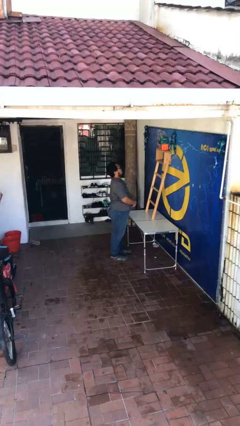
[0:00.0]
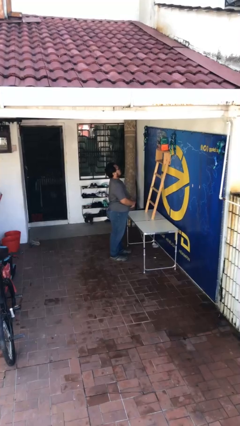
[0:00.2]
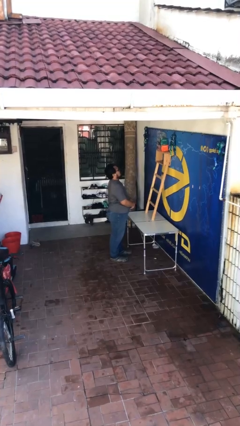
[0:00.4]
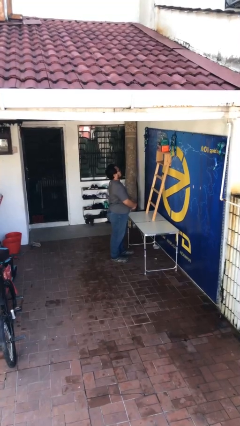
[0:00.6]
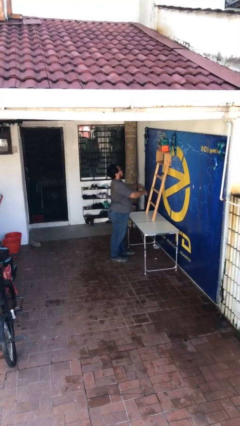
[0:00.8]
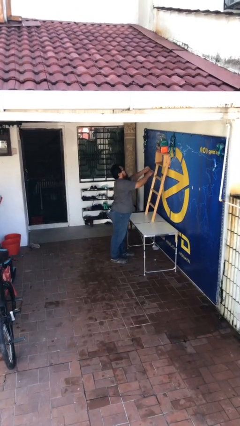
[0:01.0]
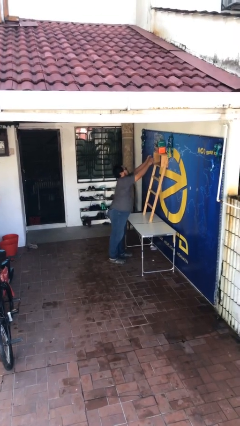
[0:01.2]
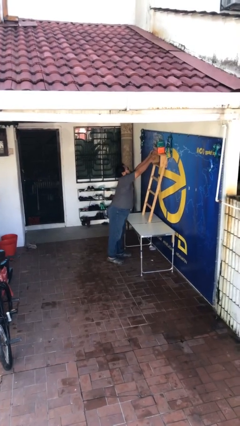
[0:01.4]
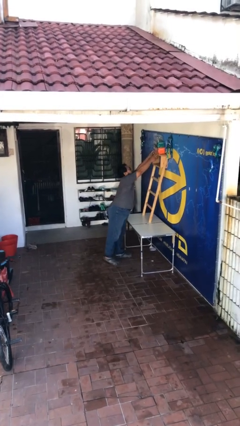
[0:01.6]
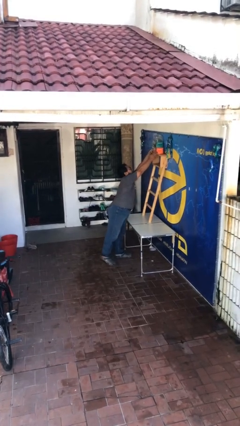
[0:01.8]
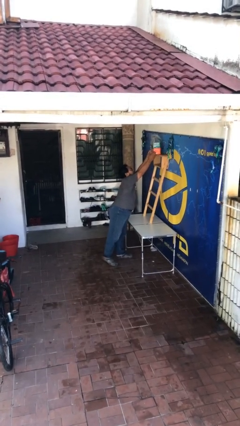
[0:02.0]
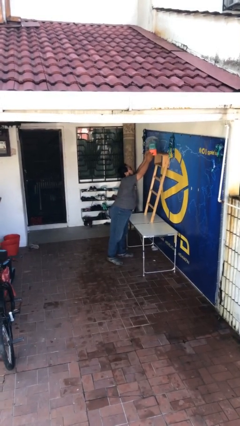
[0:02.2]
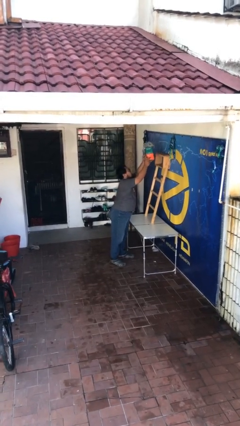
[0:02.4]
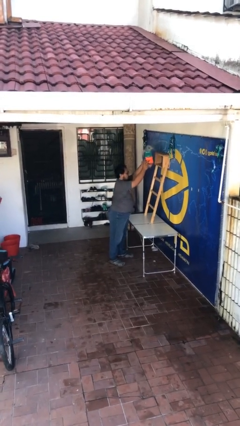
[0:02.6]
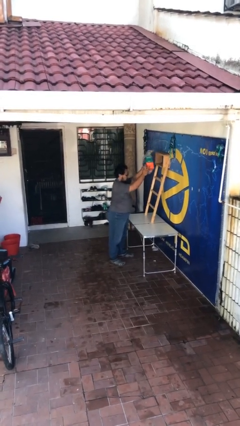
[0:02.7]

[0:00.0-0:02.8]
person picks up object from shelf

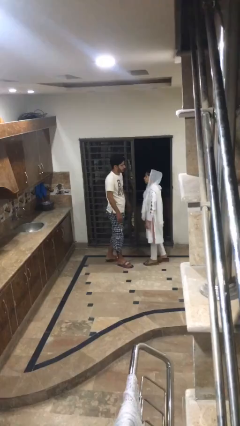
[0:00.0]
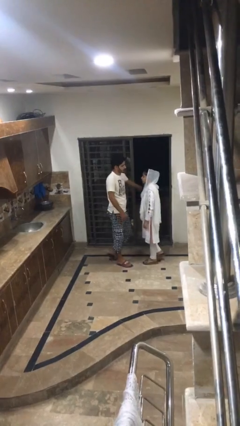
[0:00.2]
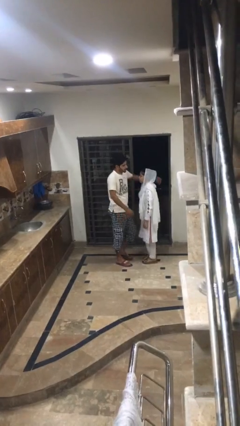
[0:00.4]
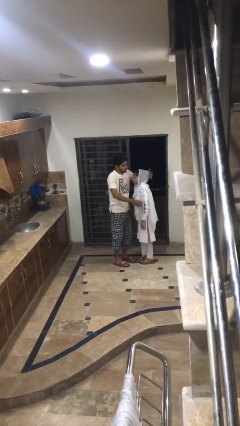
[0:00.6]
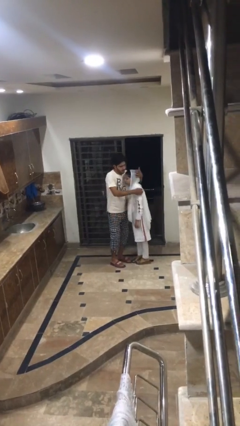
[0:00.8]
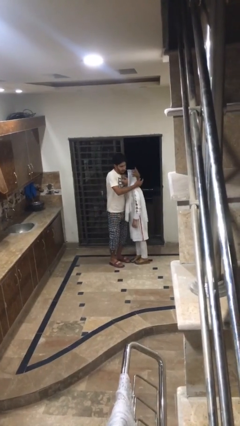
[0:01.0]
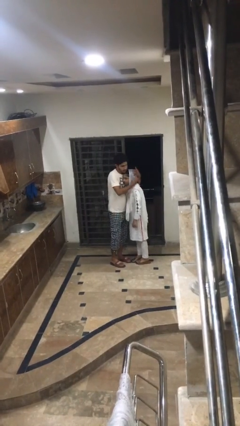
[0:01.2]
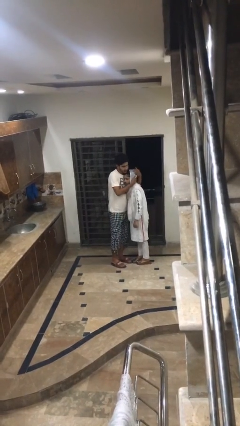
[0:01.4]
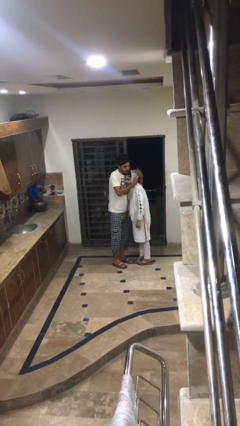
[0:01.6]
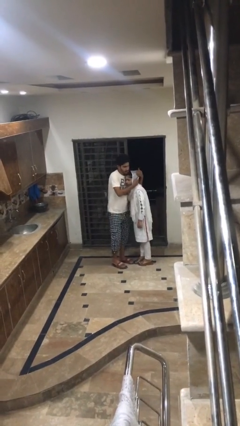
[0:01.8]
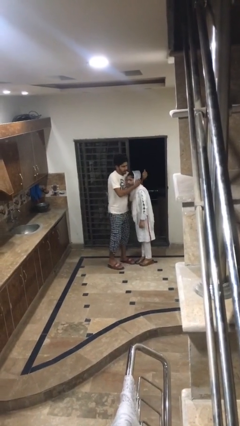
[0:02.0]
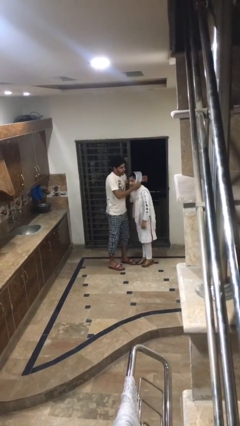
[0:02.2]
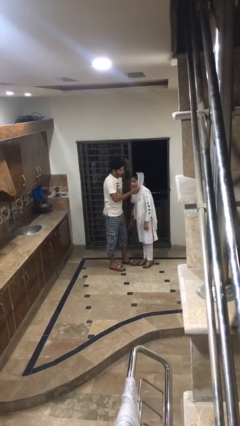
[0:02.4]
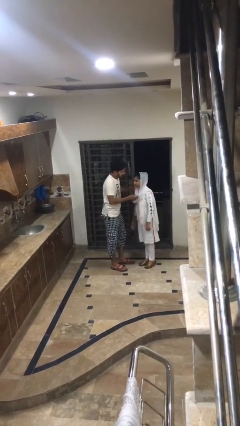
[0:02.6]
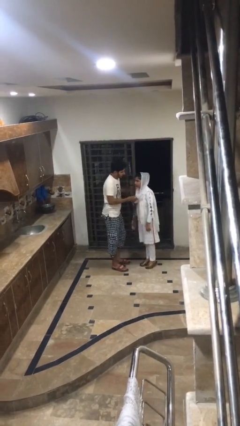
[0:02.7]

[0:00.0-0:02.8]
person embraces person

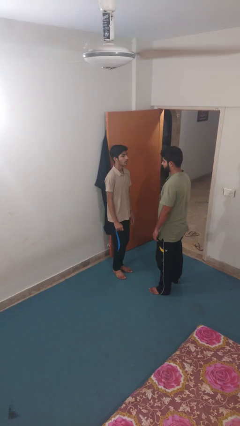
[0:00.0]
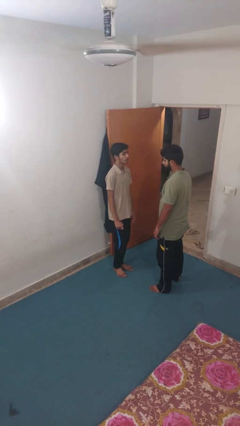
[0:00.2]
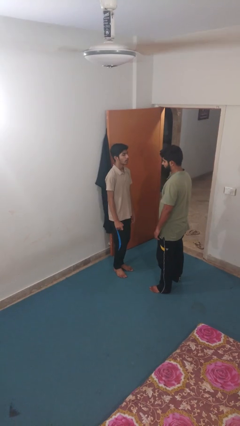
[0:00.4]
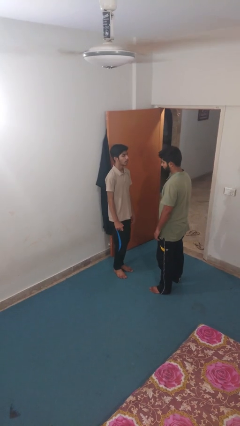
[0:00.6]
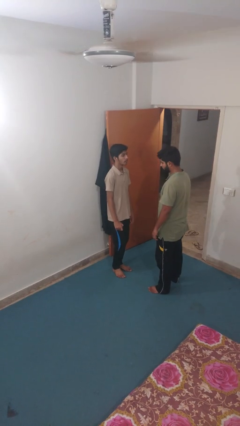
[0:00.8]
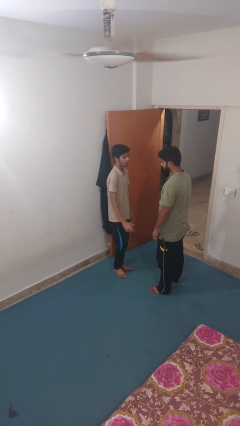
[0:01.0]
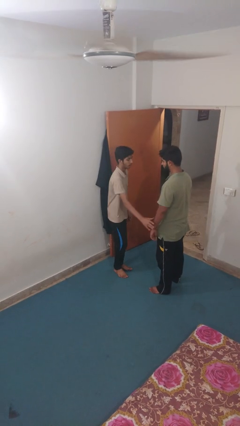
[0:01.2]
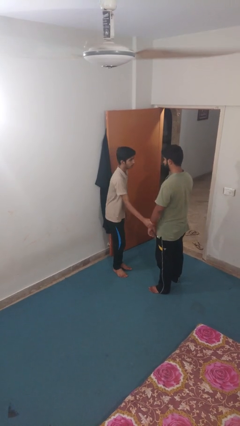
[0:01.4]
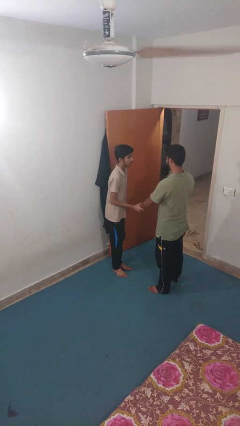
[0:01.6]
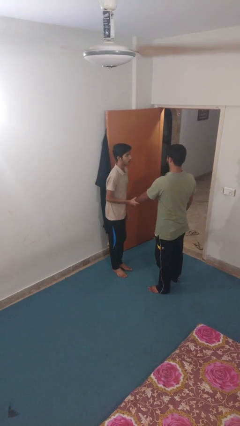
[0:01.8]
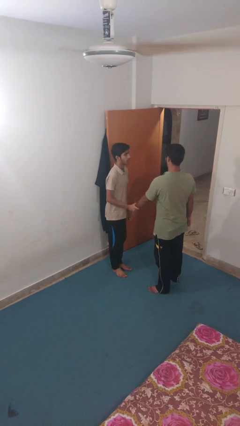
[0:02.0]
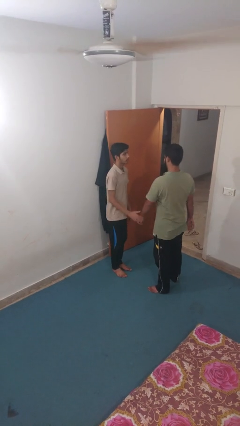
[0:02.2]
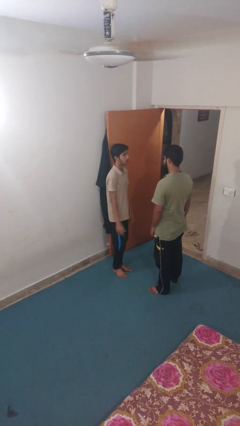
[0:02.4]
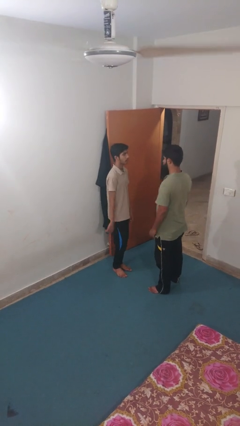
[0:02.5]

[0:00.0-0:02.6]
person grabs person by forearm

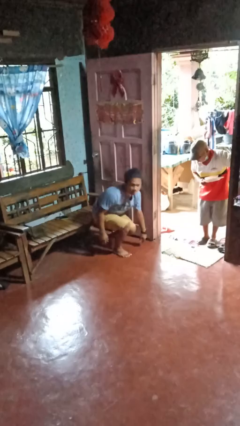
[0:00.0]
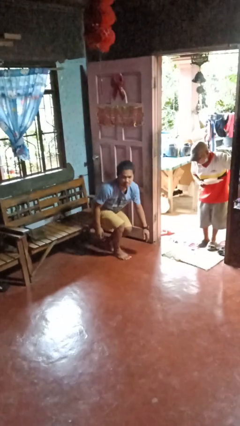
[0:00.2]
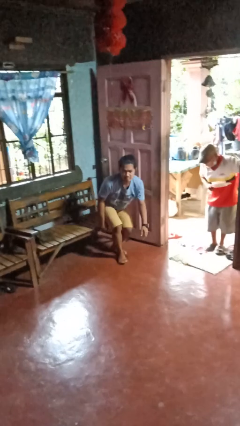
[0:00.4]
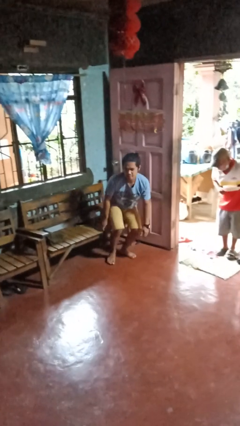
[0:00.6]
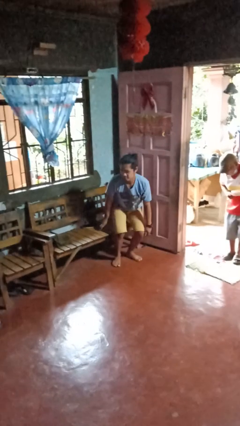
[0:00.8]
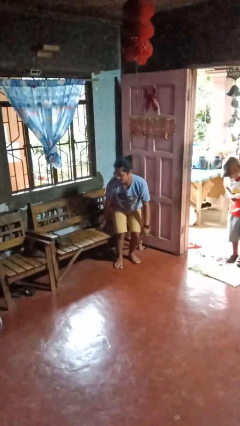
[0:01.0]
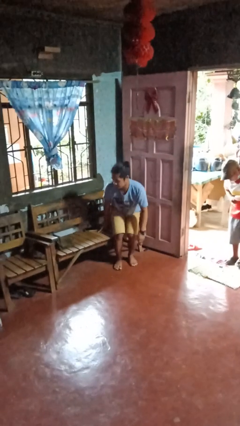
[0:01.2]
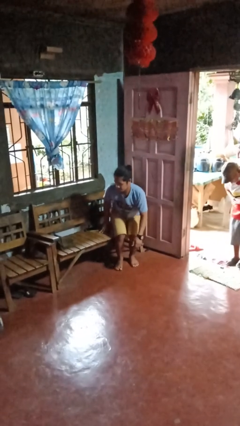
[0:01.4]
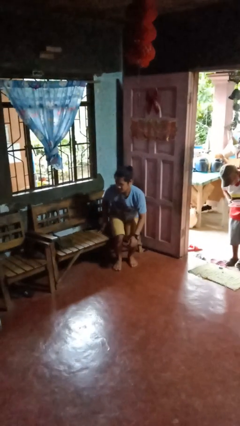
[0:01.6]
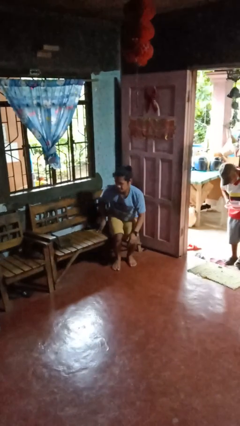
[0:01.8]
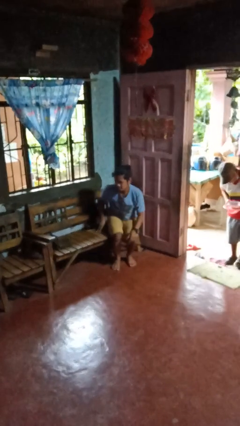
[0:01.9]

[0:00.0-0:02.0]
person stands up from floor

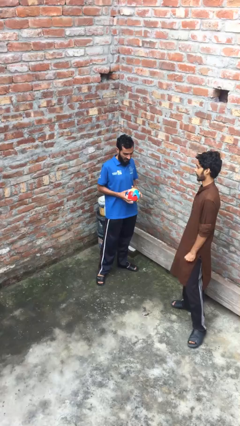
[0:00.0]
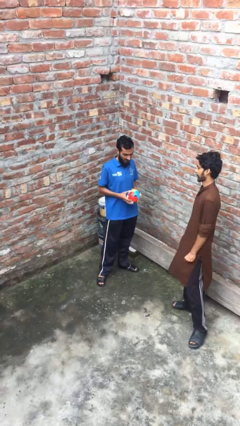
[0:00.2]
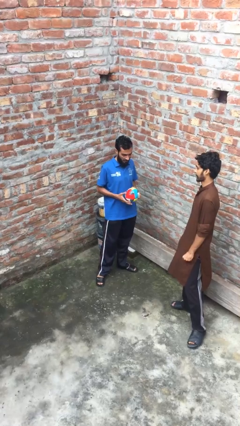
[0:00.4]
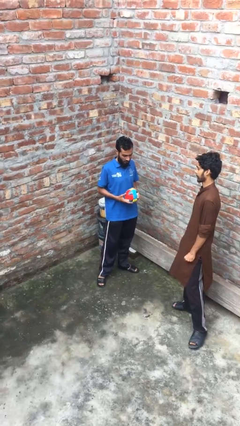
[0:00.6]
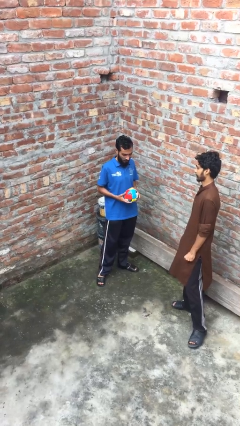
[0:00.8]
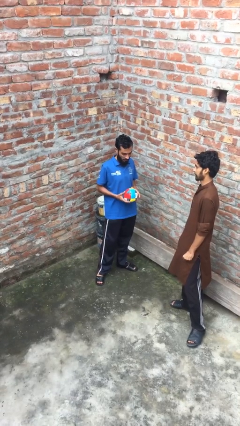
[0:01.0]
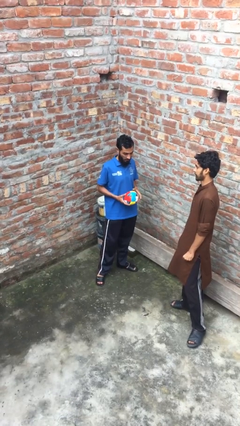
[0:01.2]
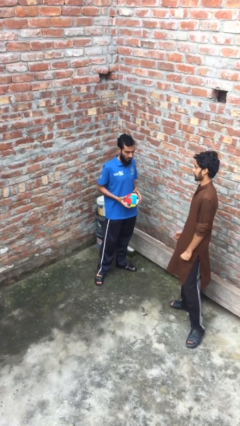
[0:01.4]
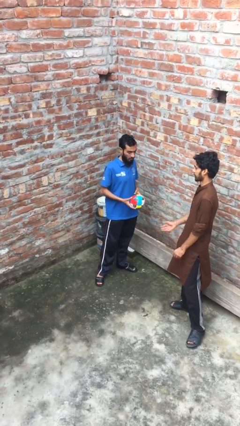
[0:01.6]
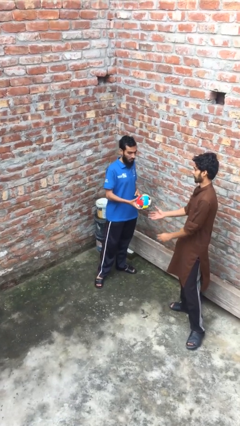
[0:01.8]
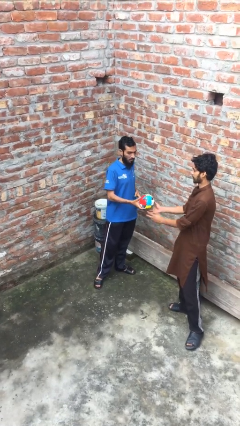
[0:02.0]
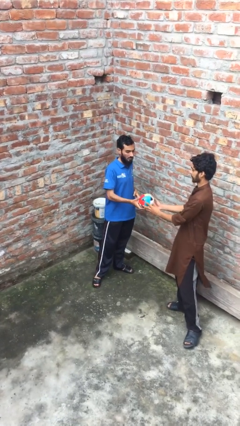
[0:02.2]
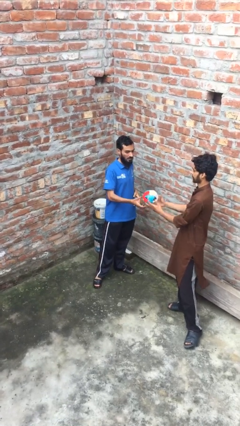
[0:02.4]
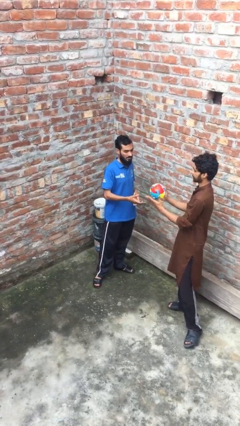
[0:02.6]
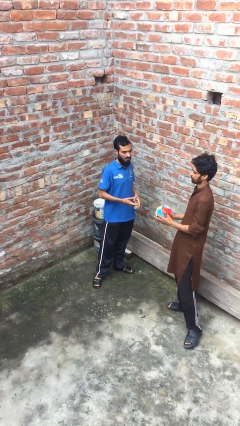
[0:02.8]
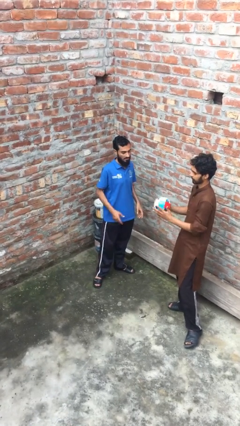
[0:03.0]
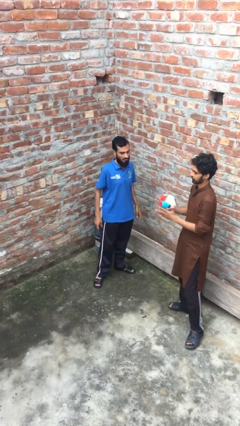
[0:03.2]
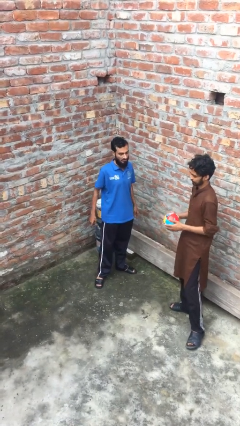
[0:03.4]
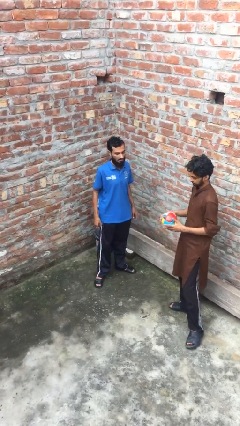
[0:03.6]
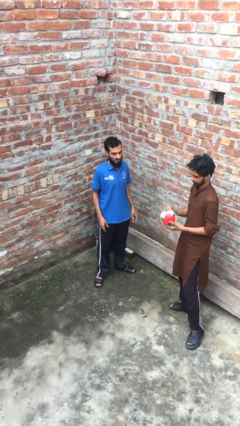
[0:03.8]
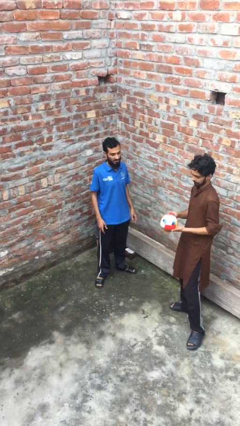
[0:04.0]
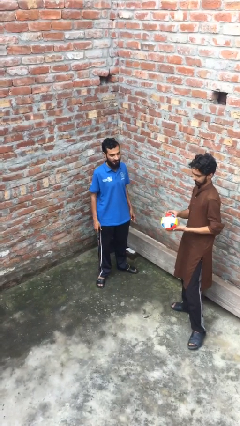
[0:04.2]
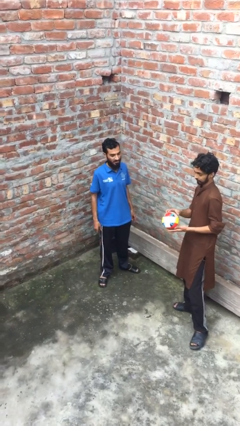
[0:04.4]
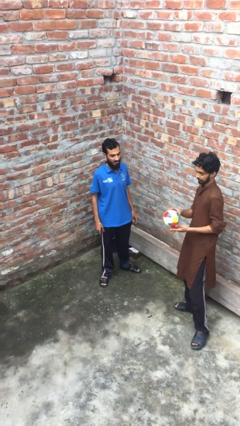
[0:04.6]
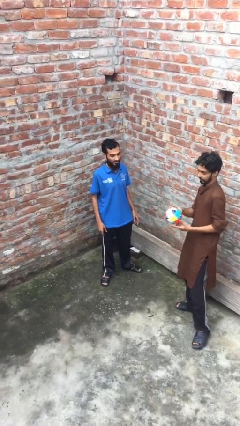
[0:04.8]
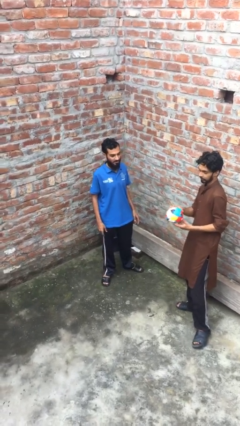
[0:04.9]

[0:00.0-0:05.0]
person transfers object to person

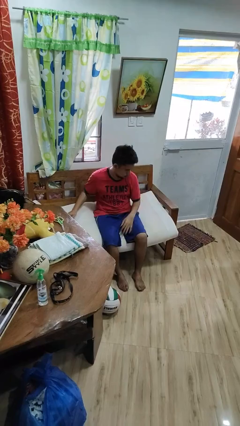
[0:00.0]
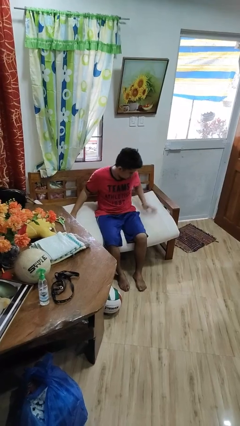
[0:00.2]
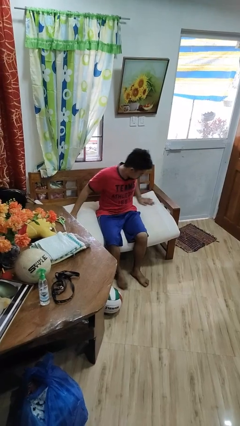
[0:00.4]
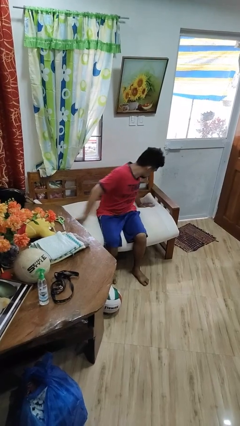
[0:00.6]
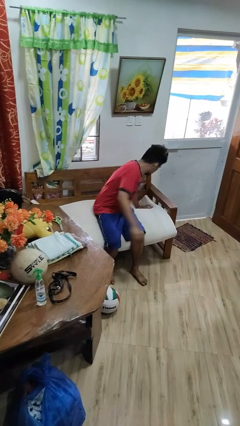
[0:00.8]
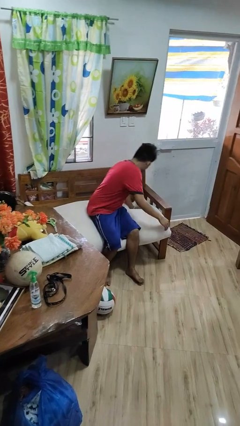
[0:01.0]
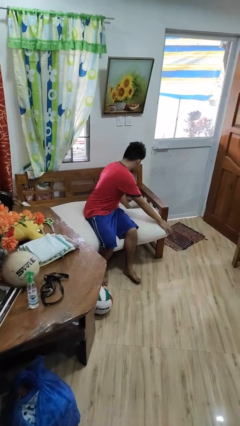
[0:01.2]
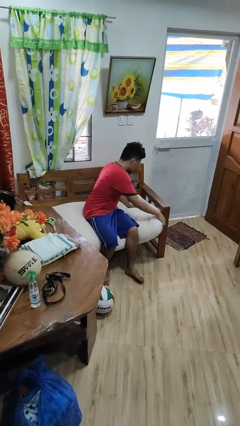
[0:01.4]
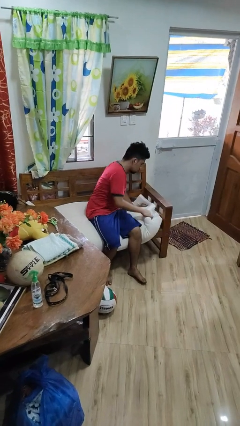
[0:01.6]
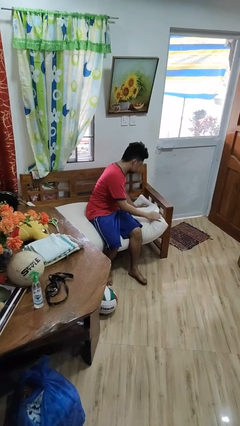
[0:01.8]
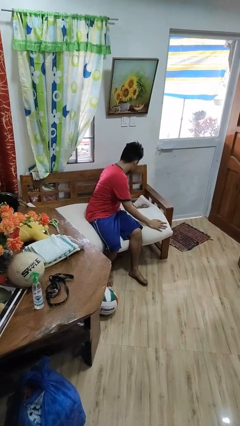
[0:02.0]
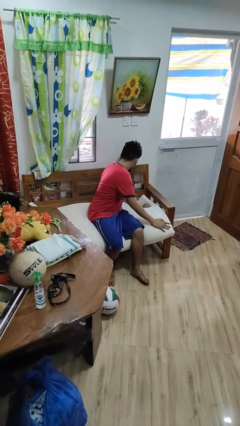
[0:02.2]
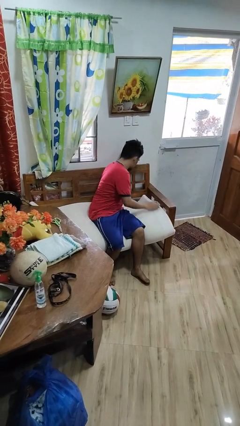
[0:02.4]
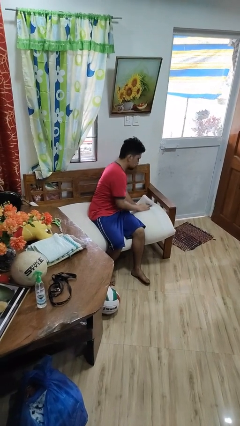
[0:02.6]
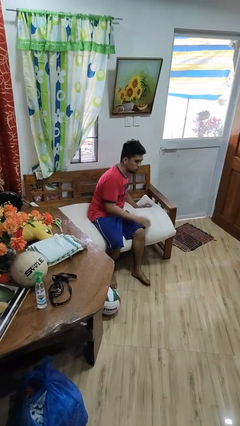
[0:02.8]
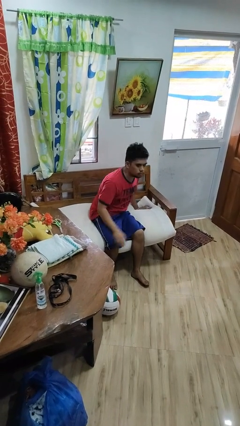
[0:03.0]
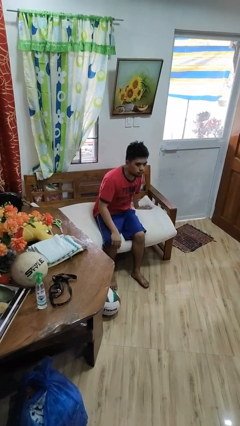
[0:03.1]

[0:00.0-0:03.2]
person searches in couch
